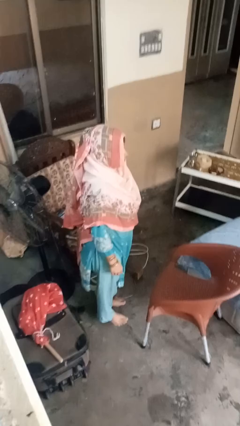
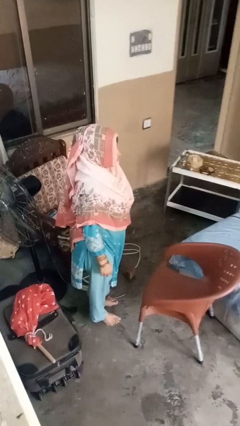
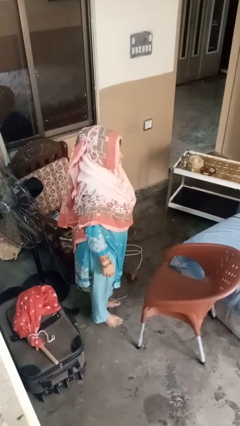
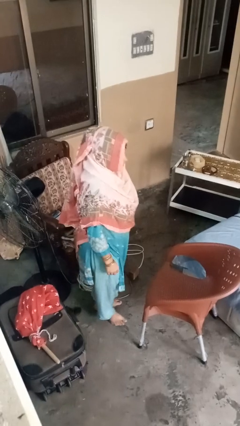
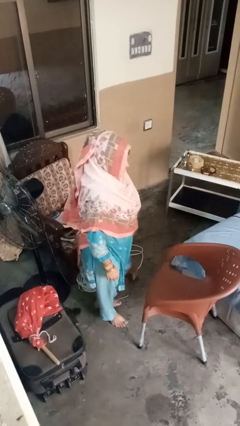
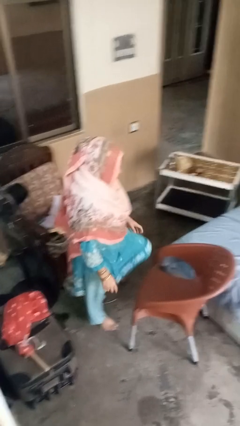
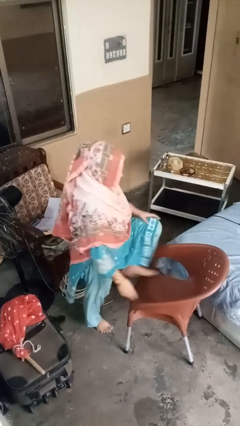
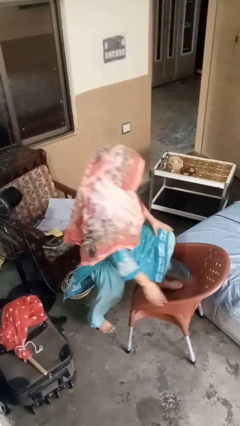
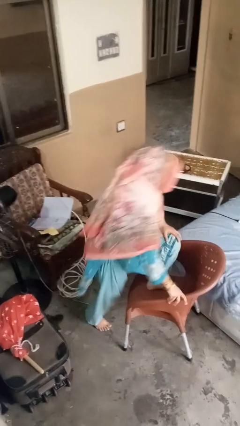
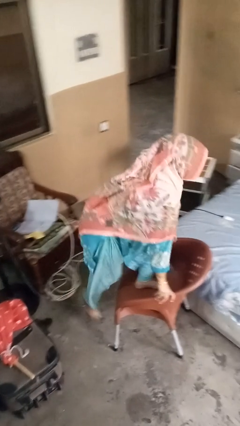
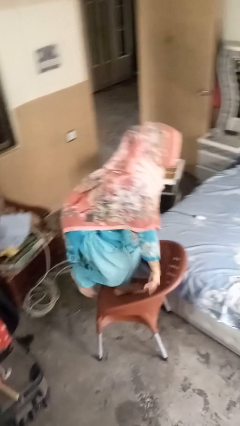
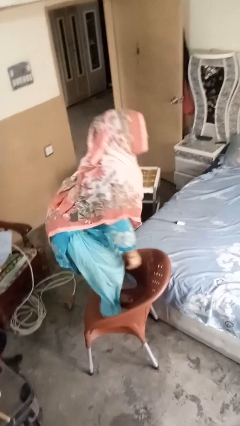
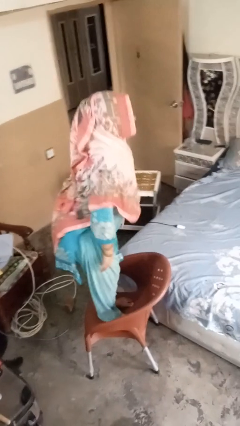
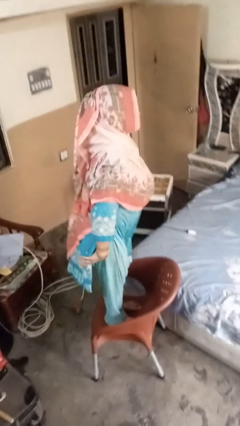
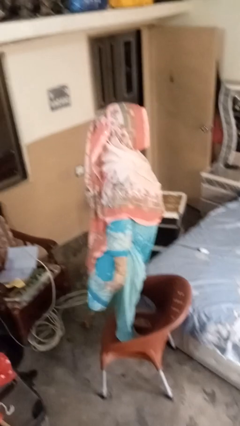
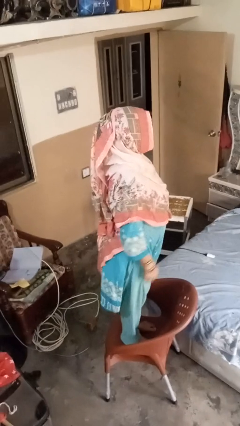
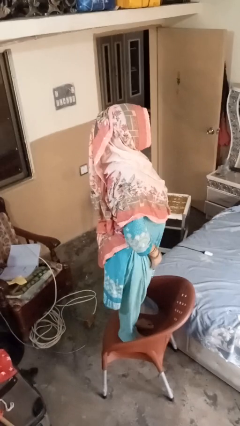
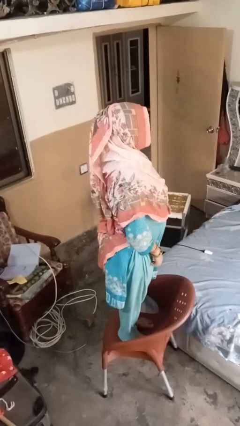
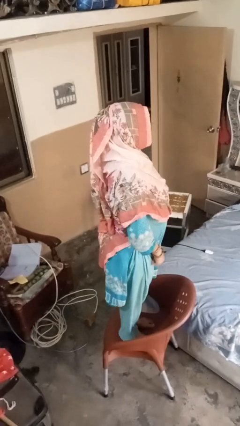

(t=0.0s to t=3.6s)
person climbs on chair

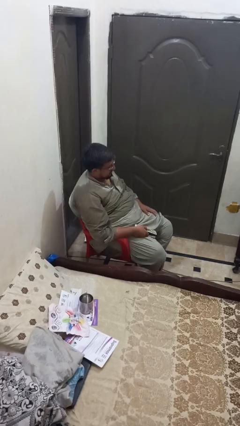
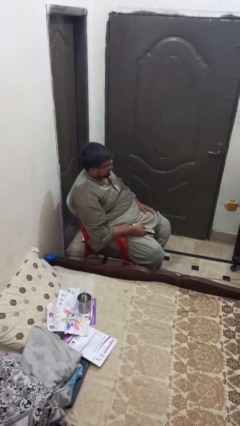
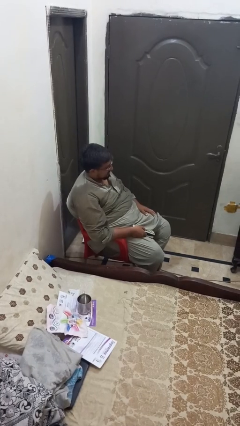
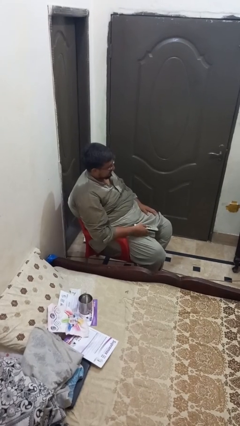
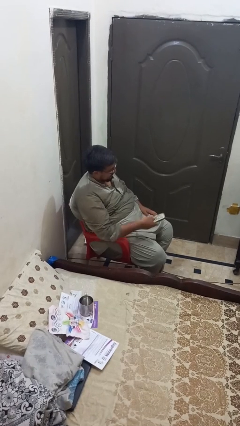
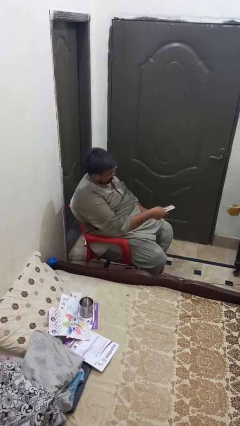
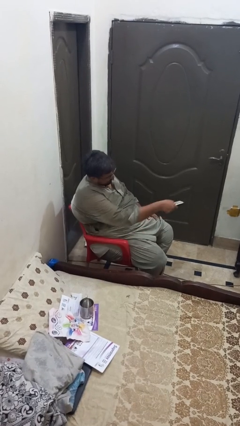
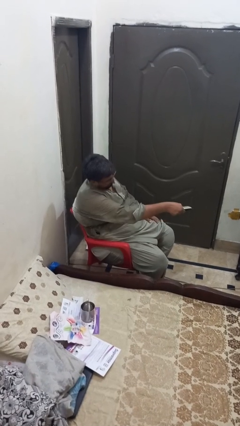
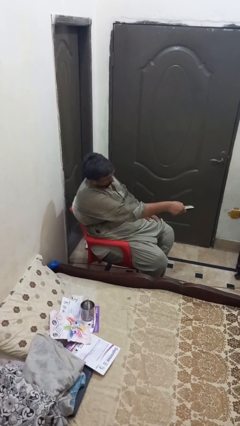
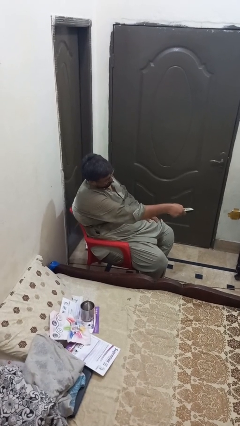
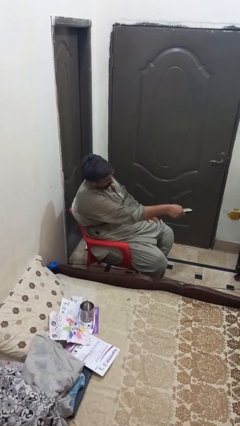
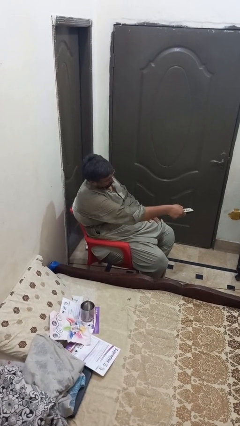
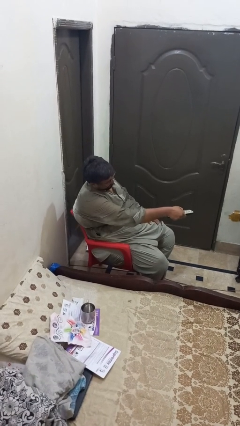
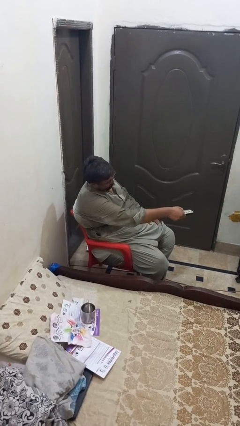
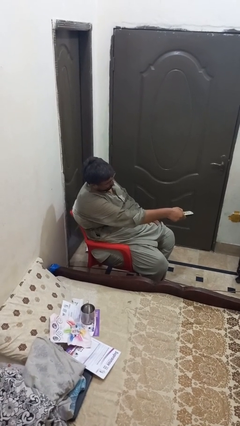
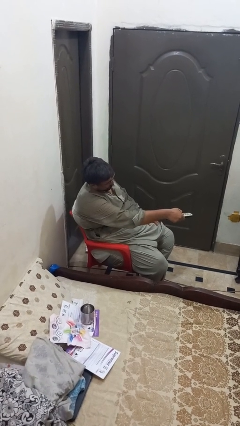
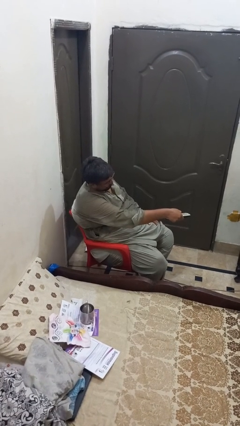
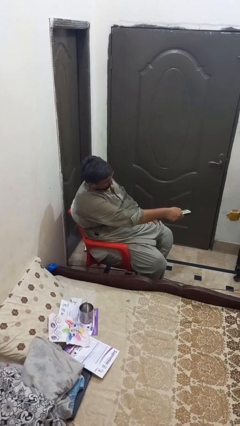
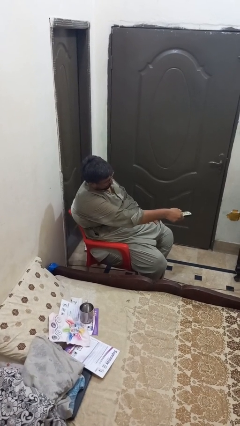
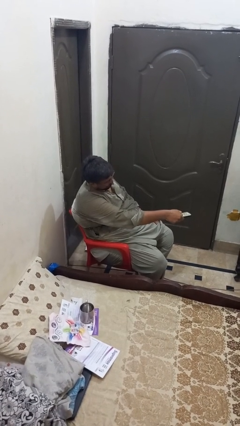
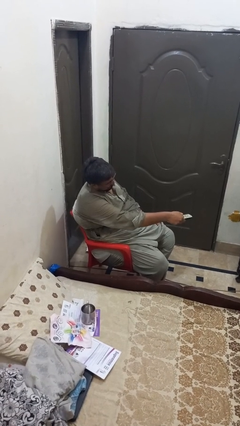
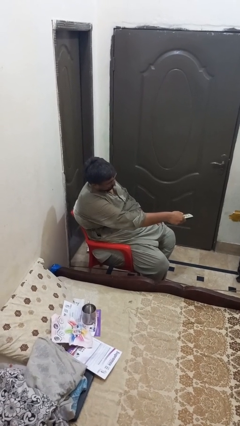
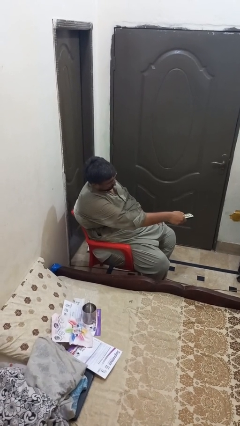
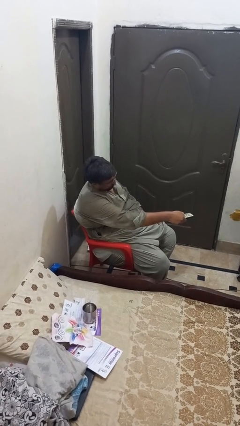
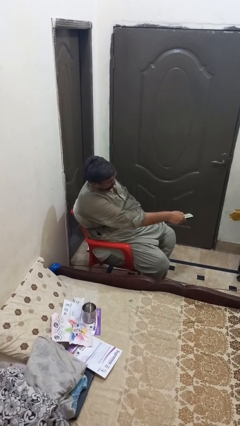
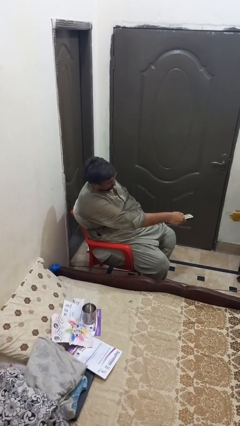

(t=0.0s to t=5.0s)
person uses television remote

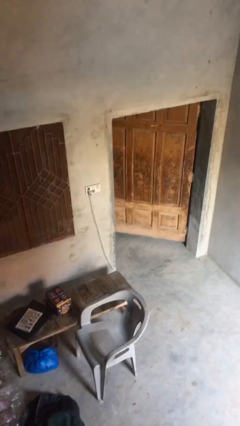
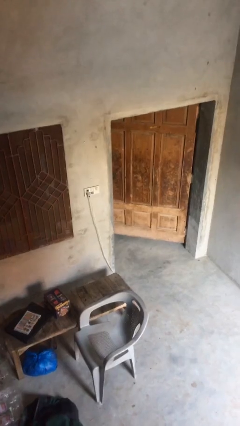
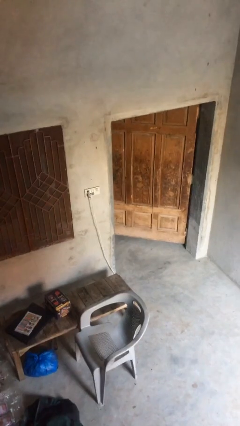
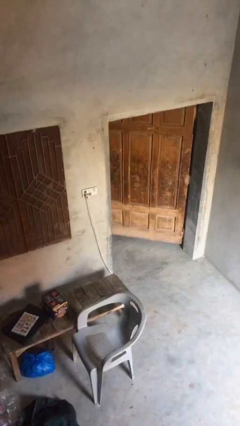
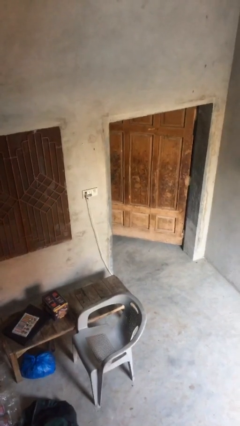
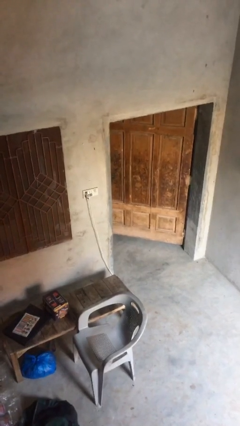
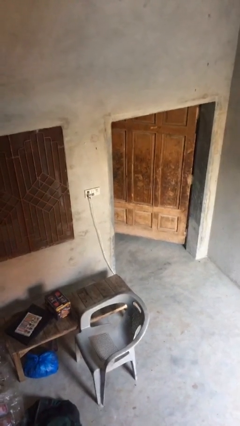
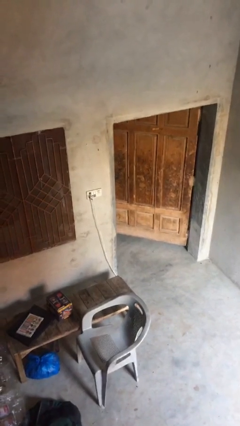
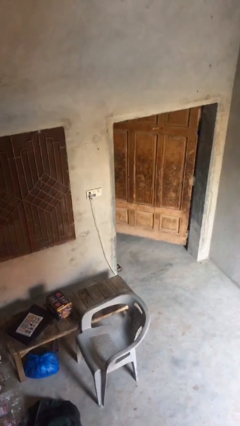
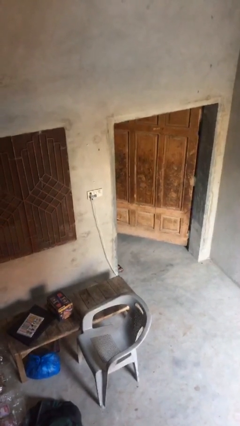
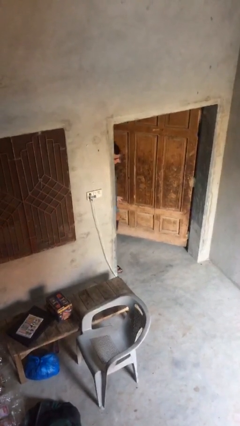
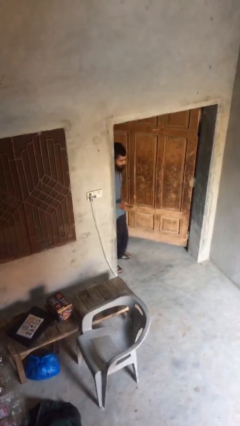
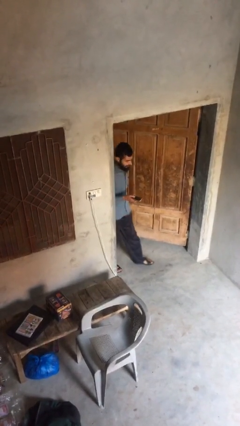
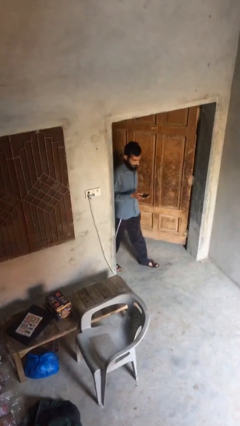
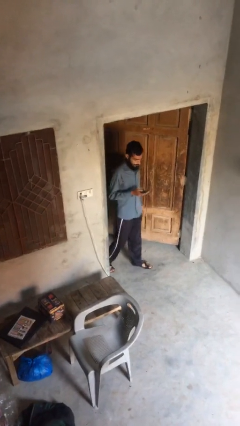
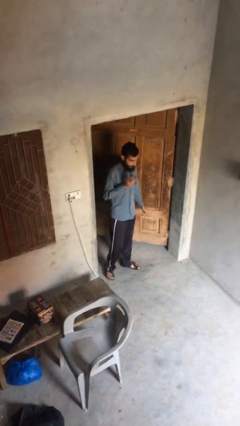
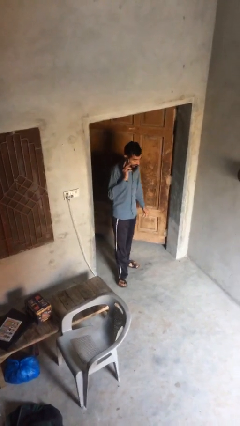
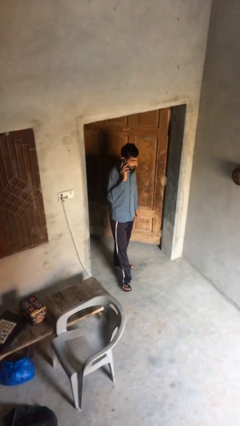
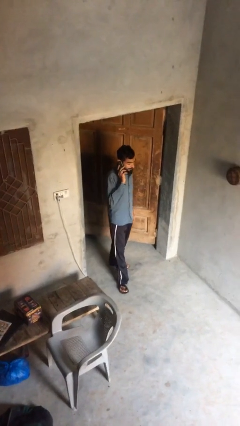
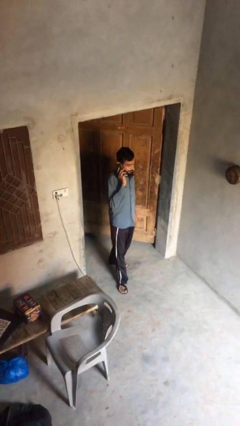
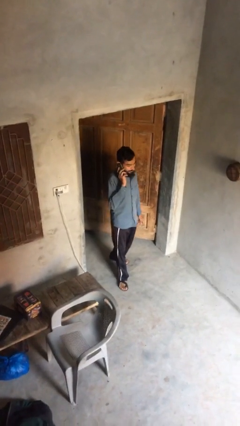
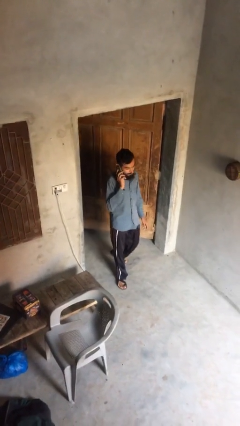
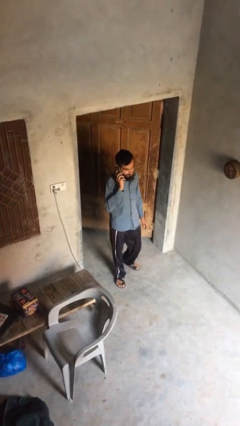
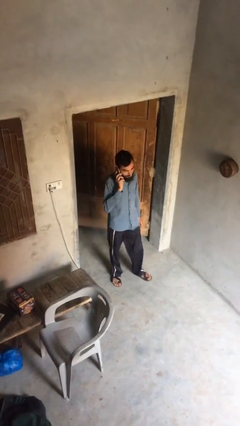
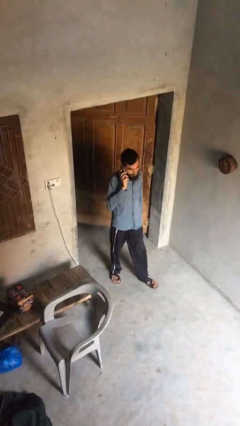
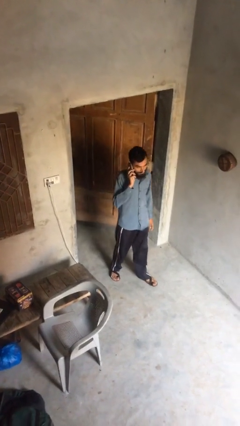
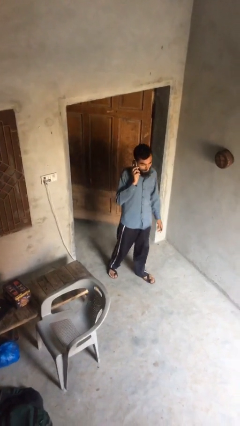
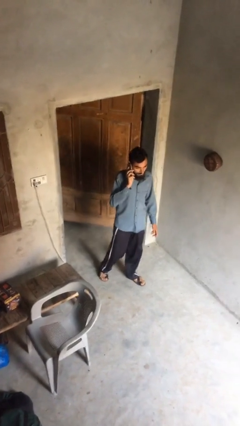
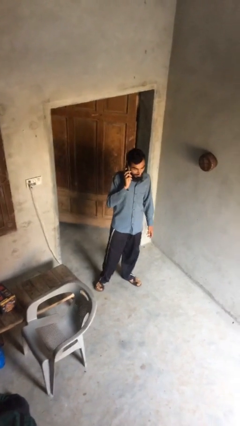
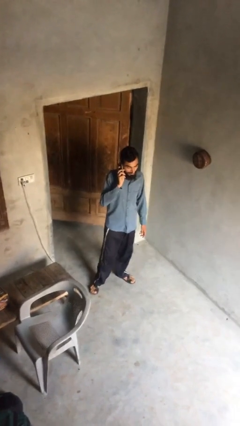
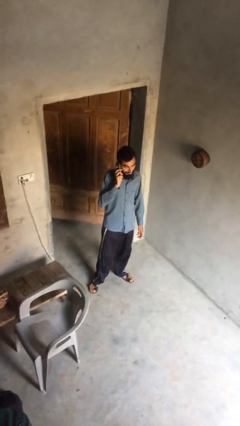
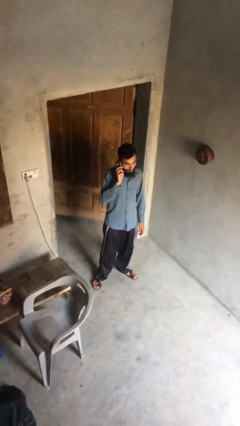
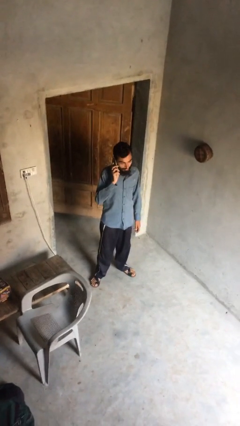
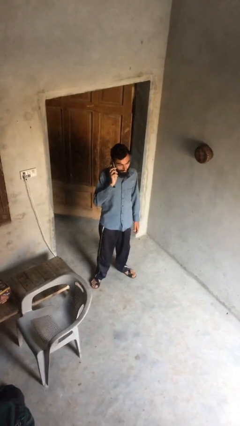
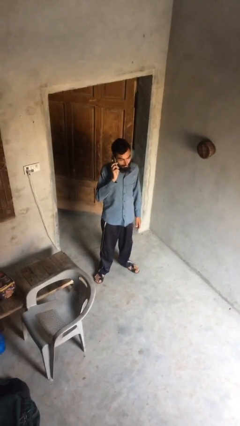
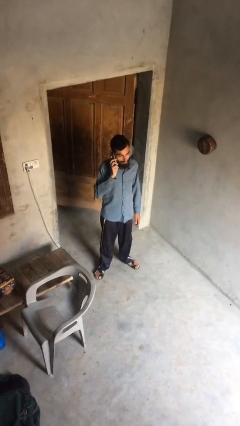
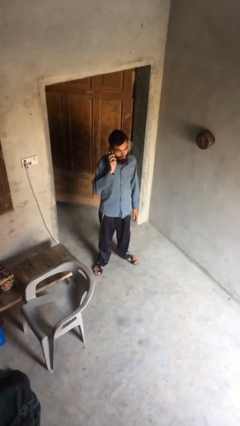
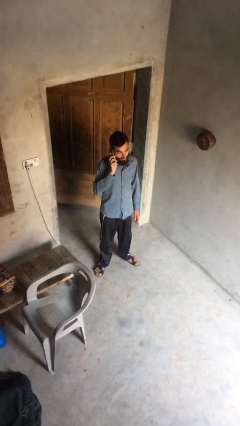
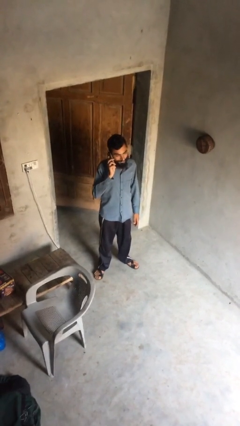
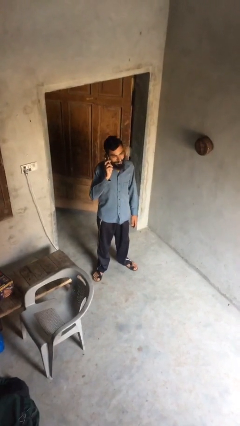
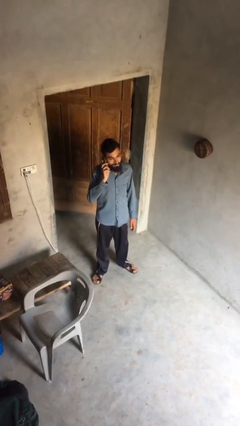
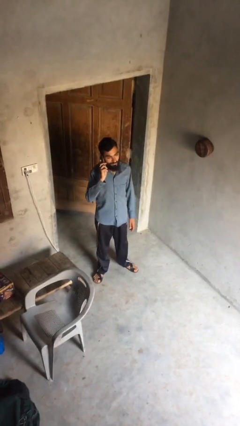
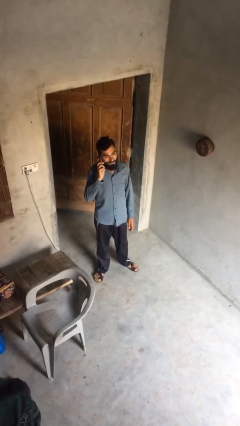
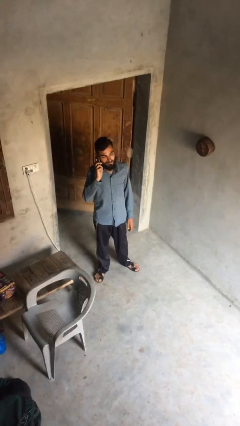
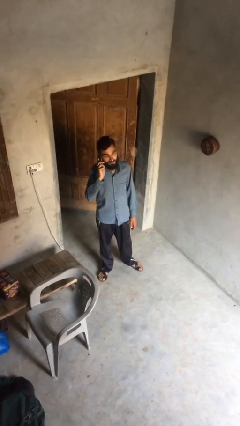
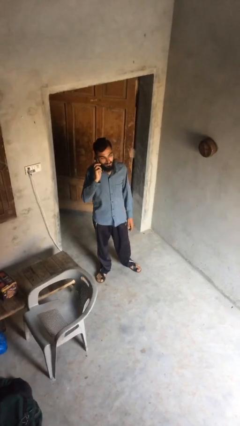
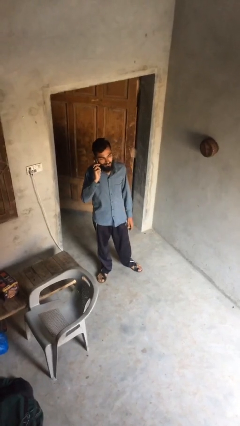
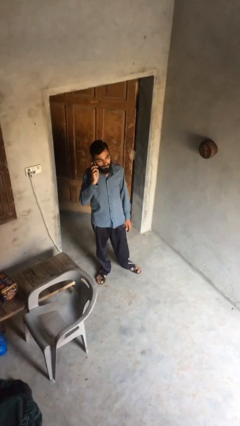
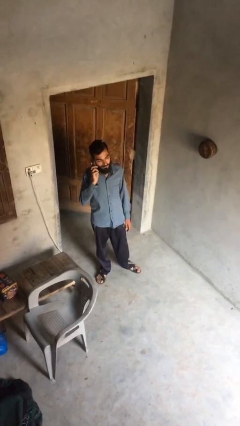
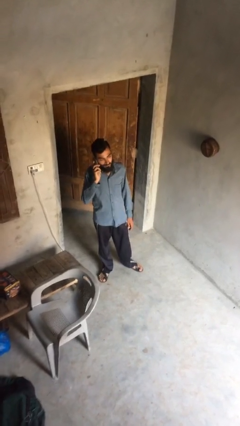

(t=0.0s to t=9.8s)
person enters scene through structure
